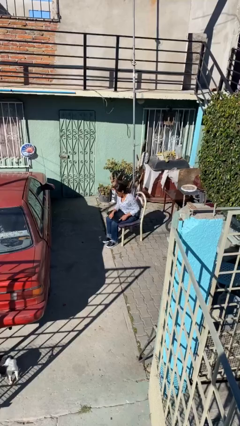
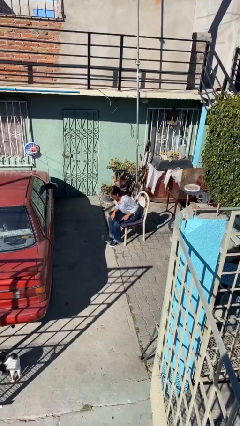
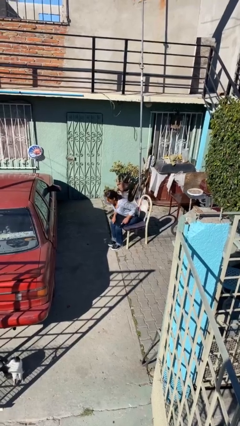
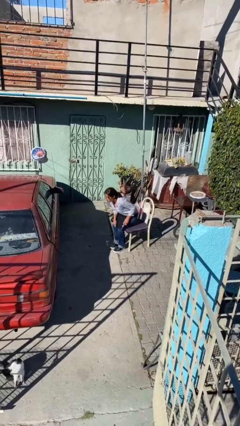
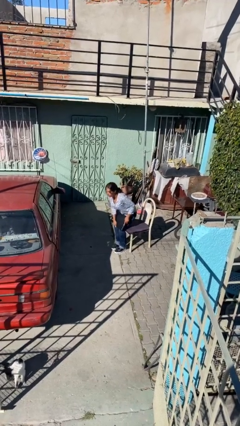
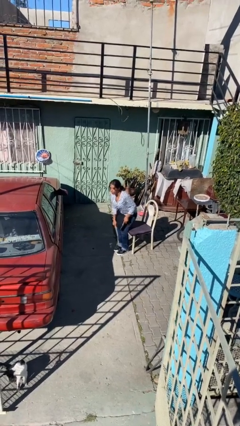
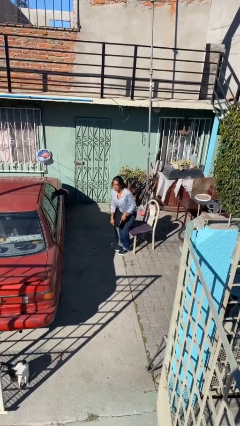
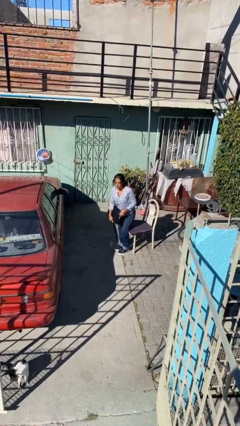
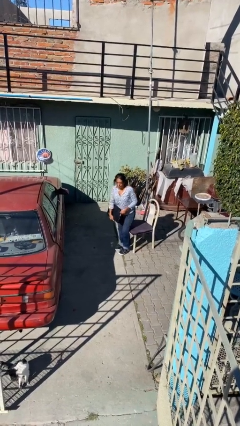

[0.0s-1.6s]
person stands up

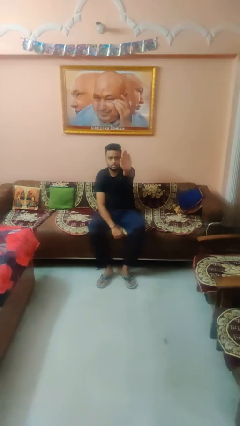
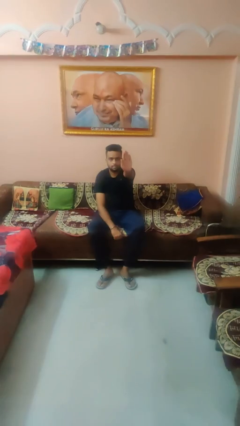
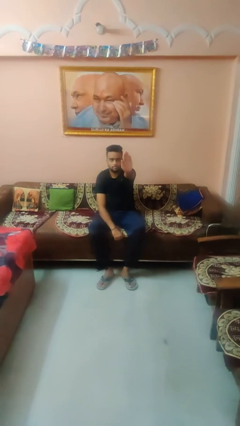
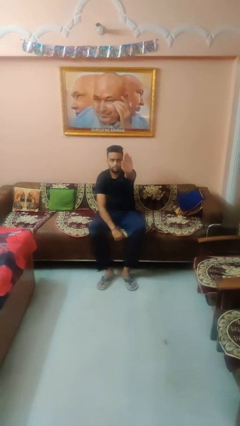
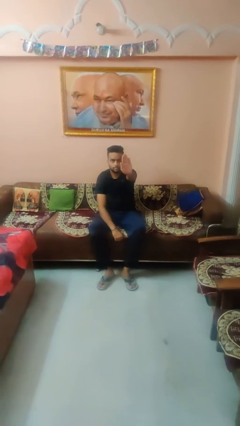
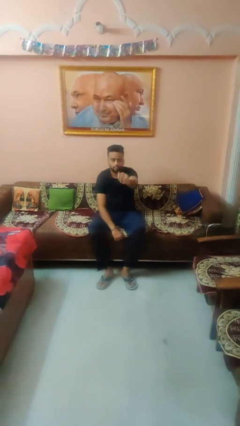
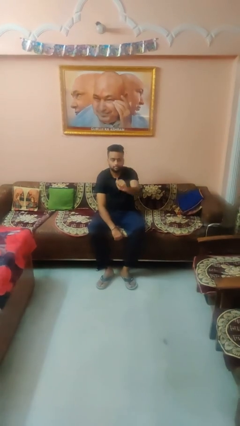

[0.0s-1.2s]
person gestures stop

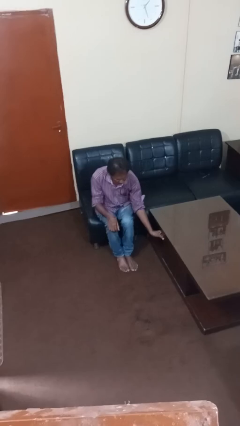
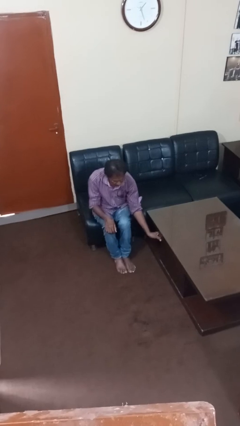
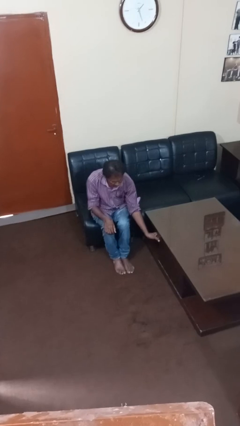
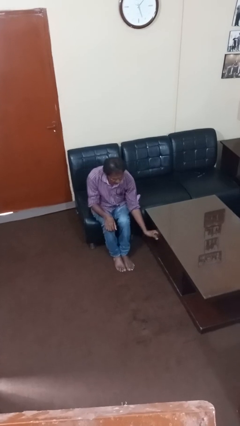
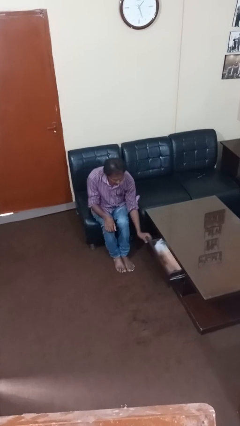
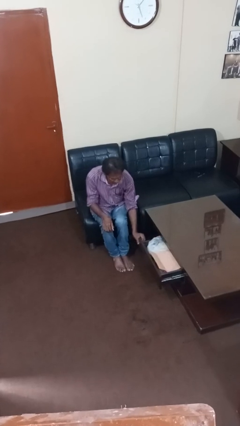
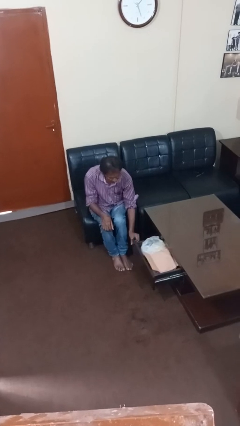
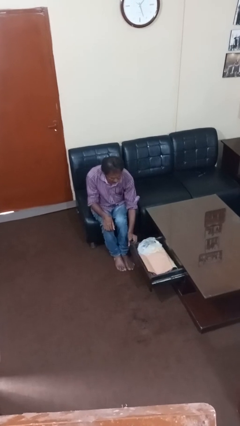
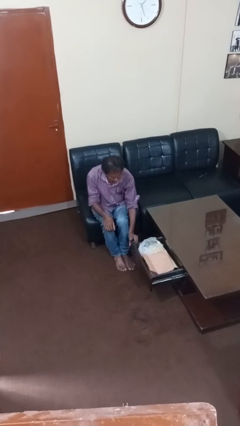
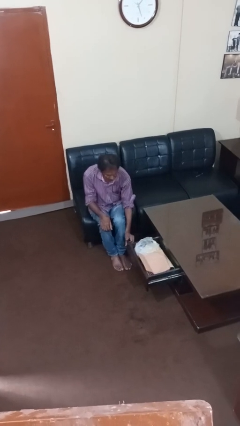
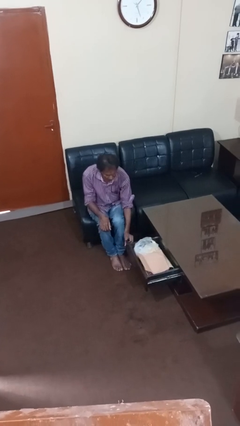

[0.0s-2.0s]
person opens dresser drawer

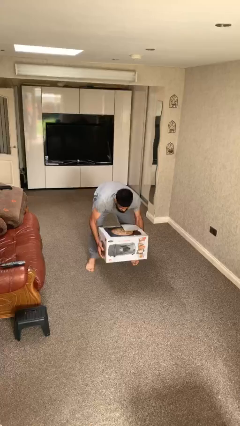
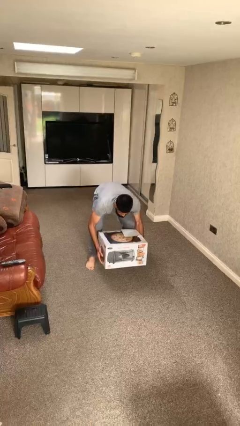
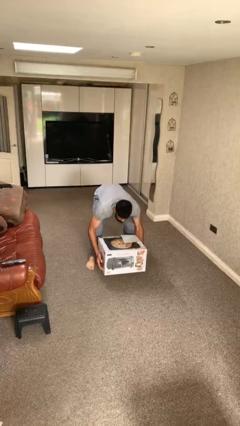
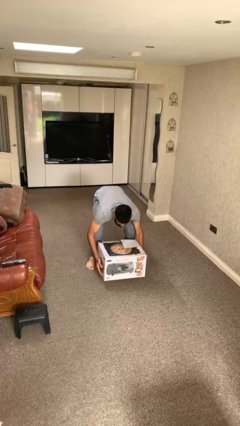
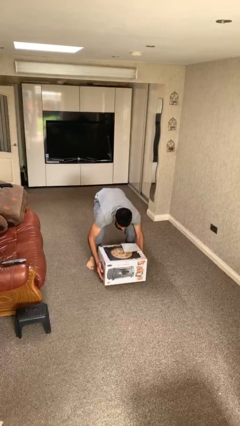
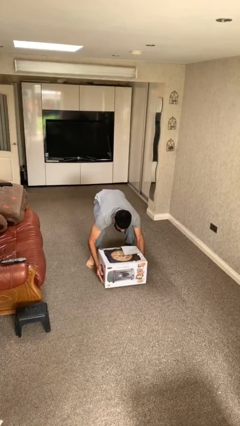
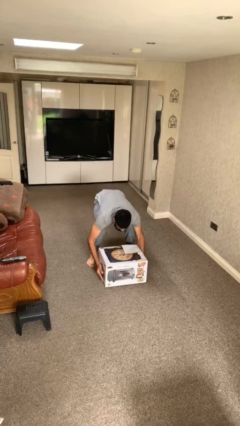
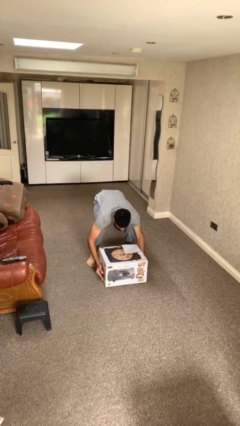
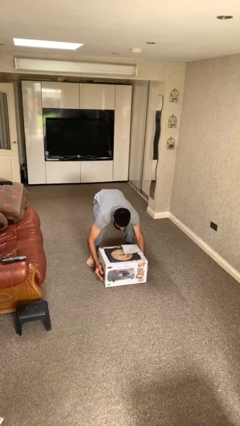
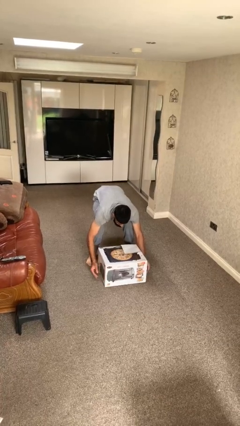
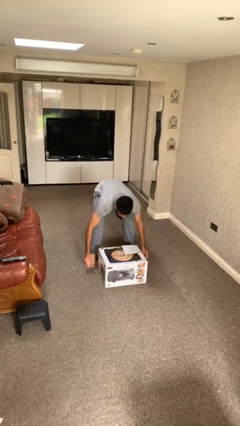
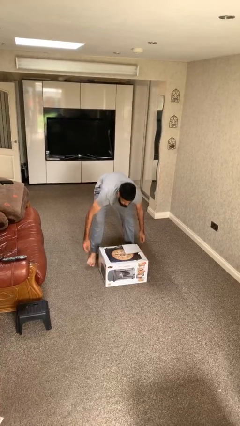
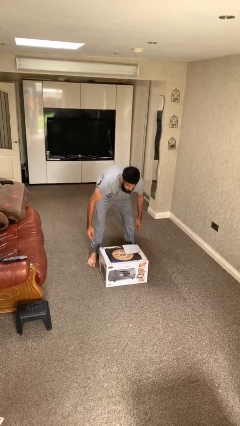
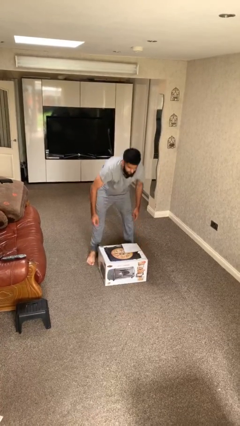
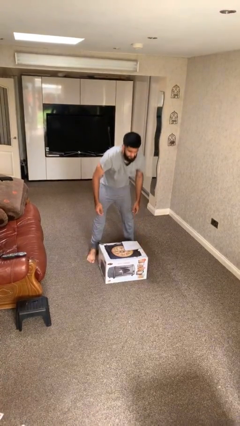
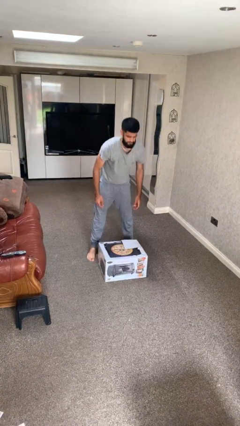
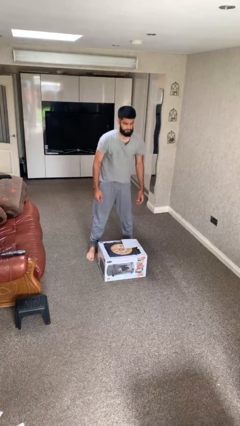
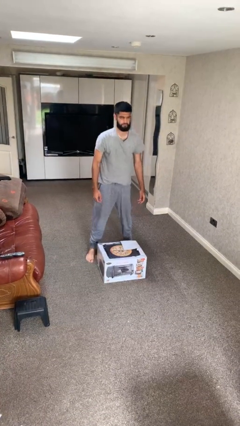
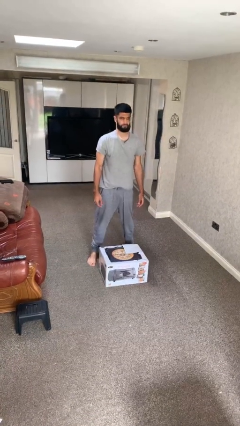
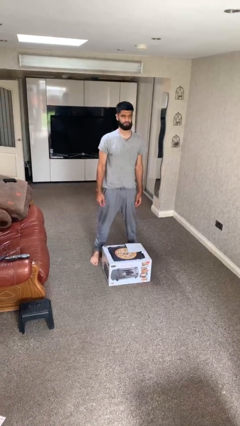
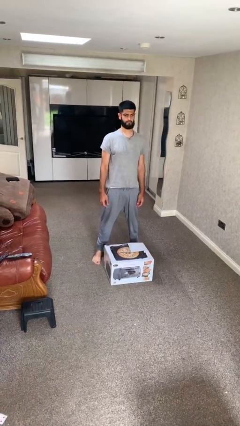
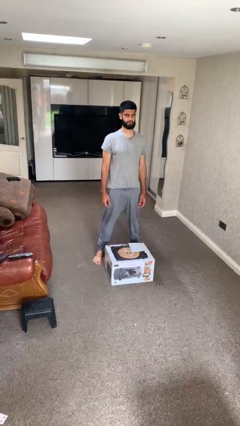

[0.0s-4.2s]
person puts down object on floor

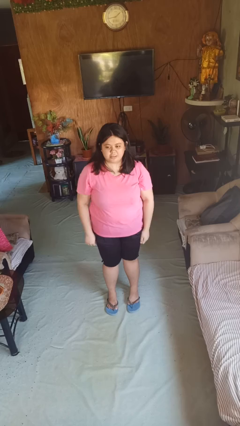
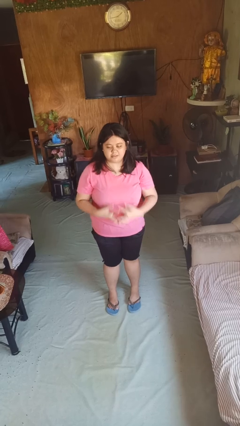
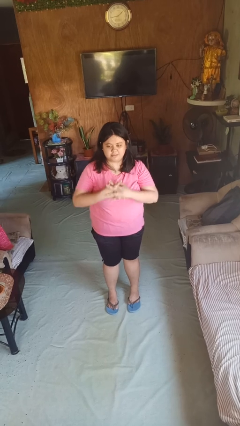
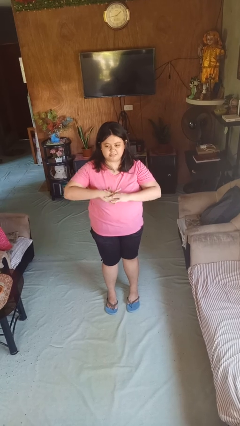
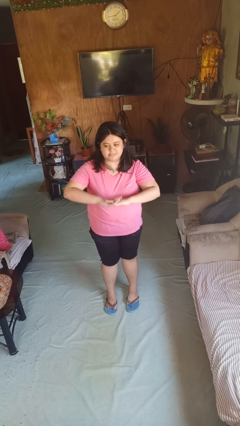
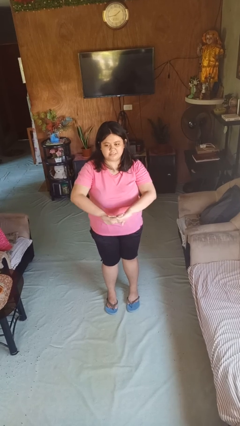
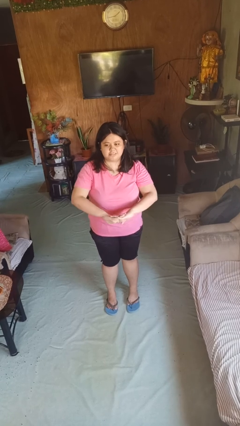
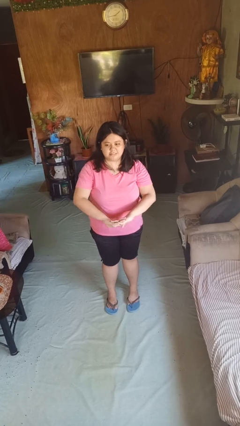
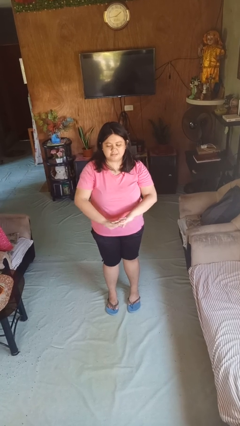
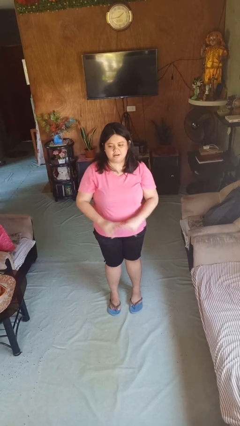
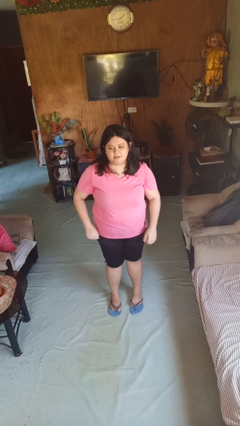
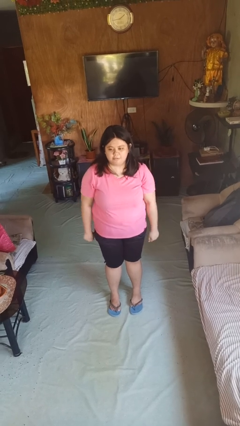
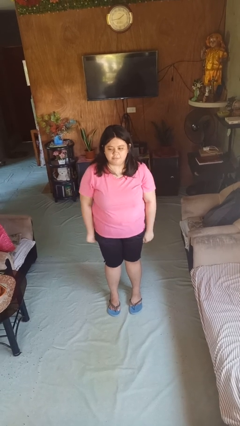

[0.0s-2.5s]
person cracks knuckles

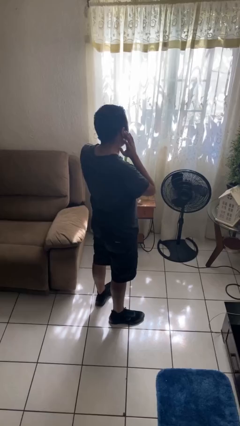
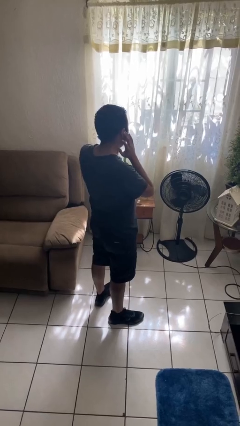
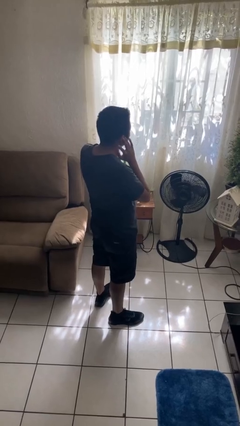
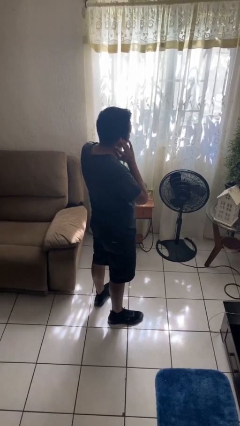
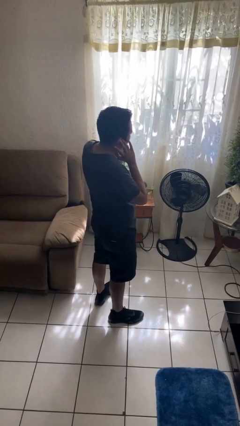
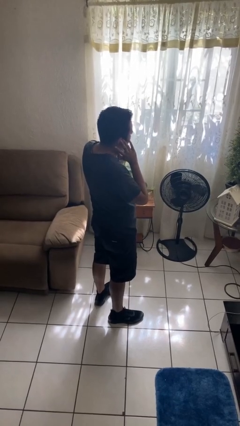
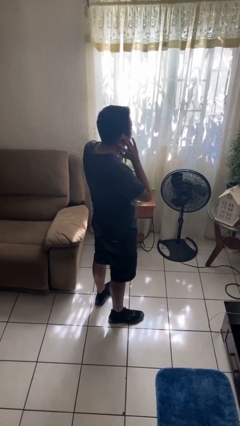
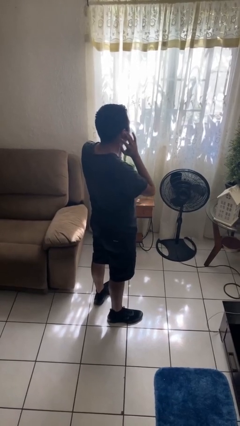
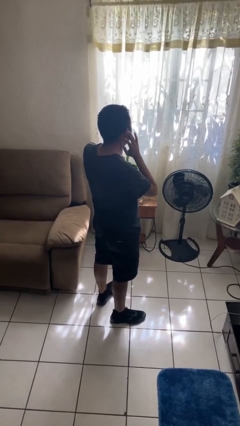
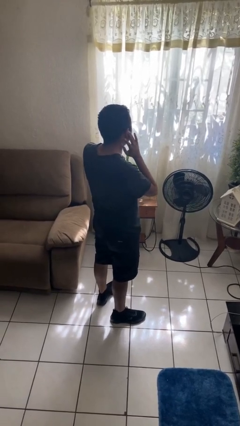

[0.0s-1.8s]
person puts fingers in ear

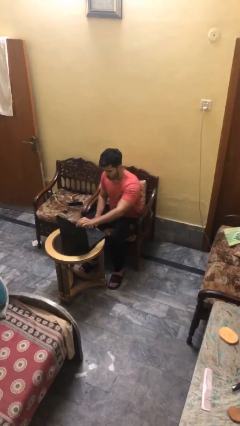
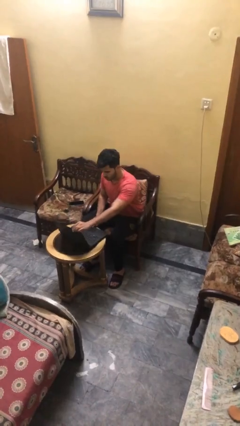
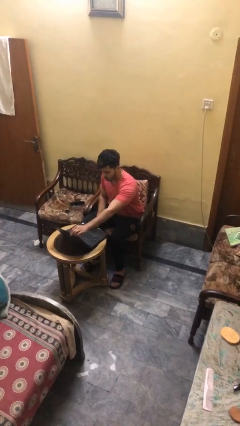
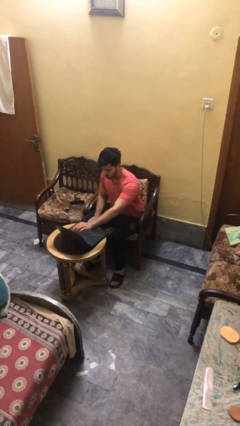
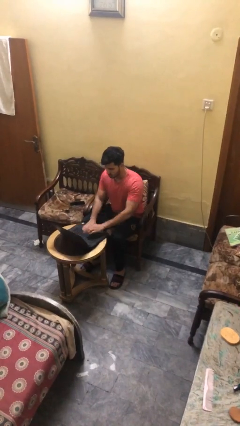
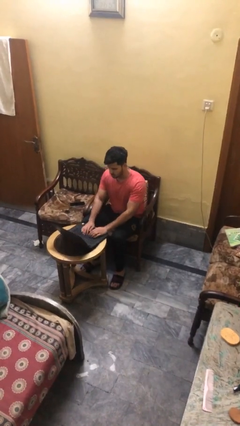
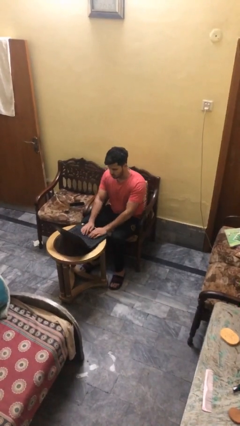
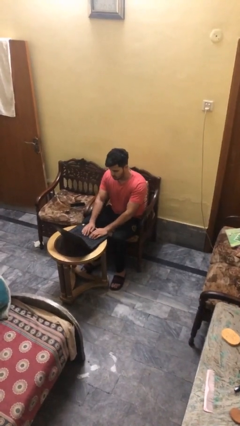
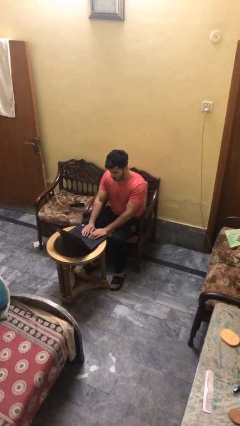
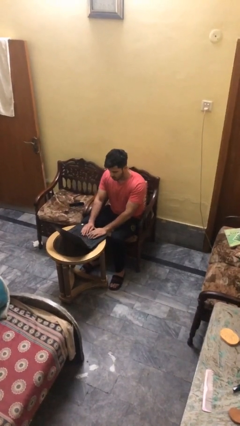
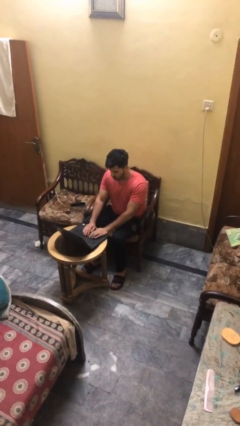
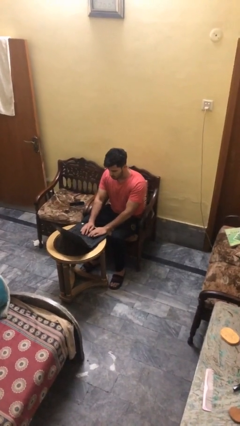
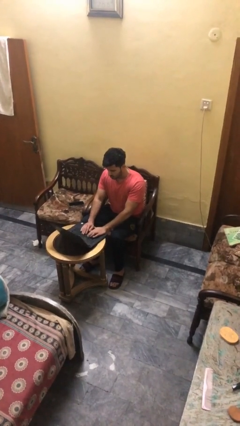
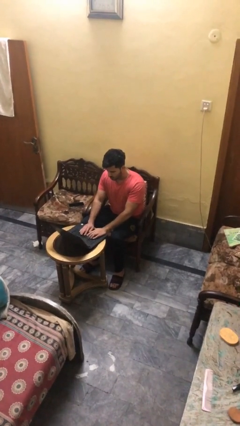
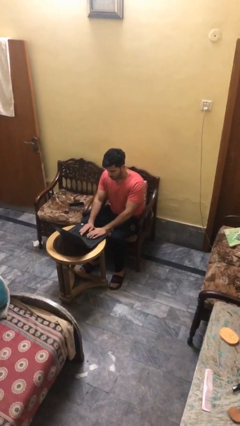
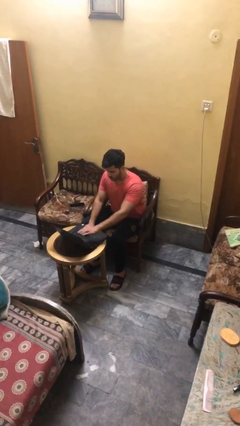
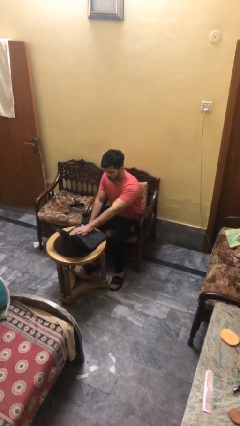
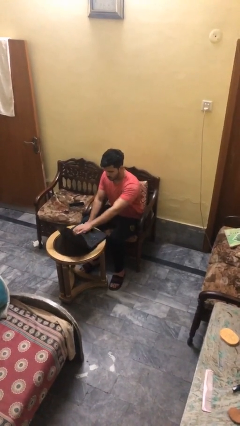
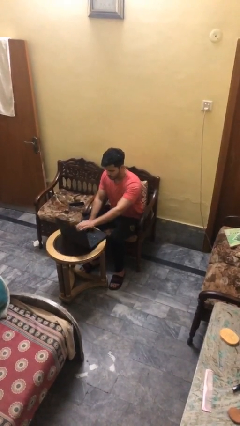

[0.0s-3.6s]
person interacts with laptop
